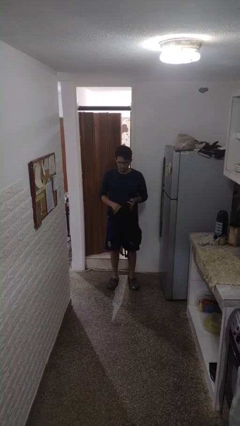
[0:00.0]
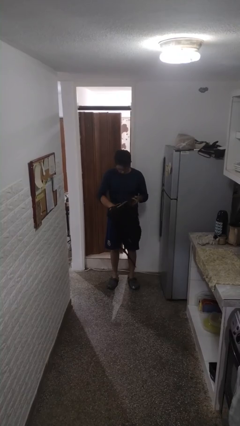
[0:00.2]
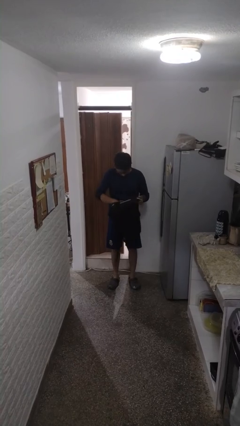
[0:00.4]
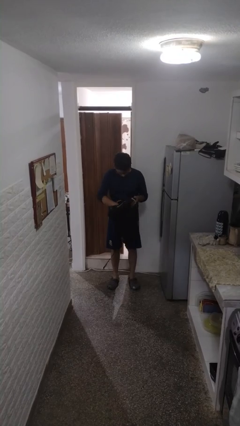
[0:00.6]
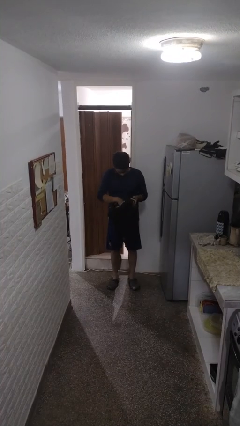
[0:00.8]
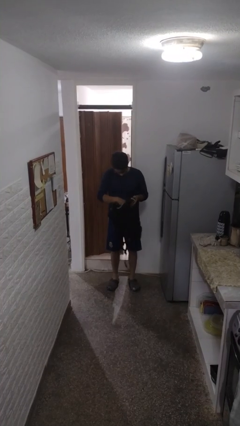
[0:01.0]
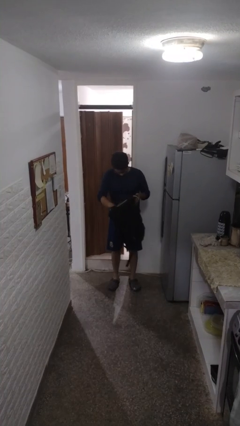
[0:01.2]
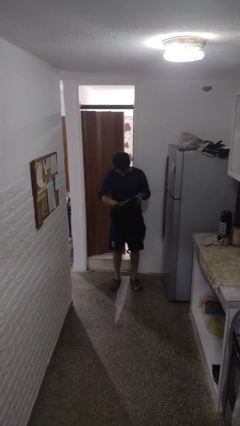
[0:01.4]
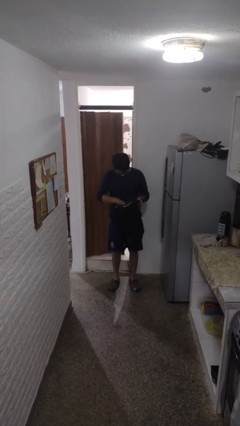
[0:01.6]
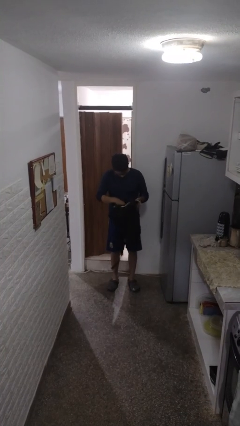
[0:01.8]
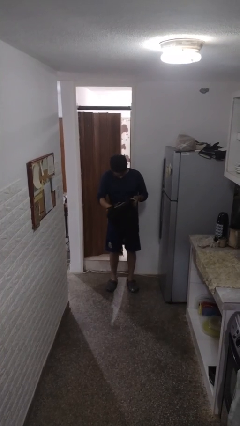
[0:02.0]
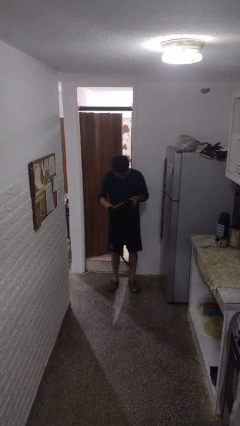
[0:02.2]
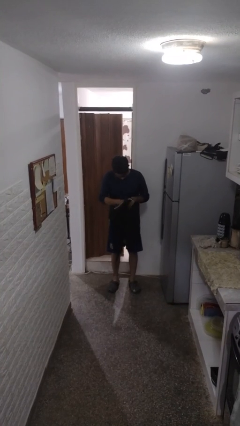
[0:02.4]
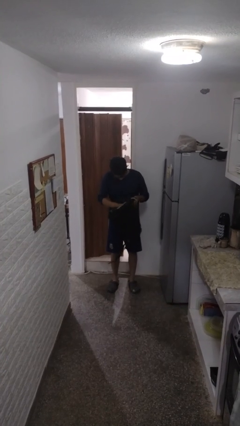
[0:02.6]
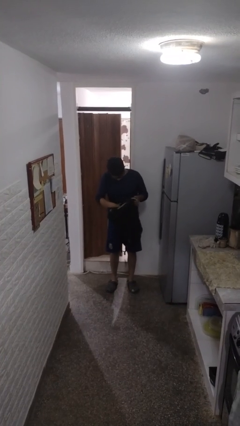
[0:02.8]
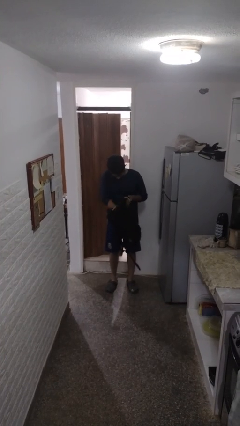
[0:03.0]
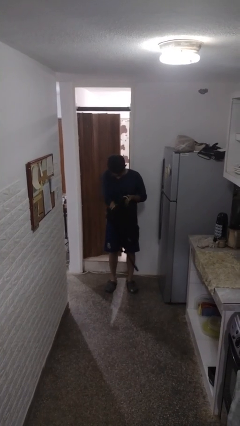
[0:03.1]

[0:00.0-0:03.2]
person searches in backpack

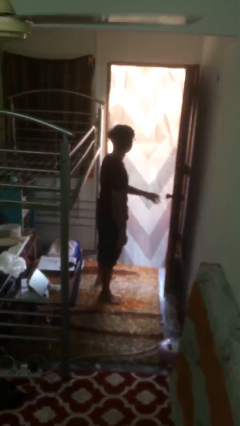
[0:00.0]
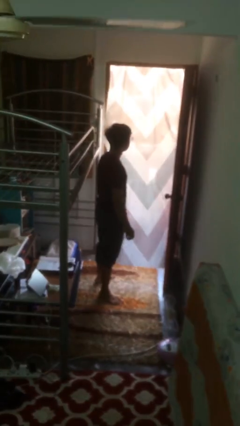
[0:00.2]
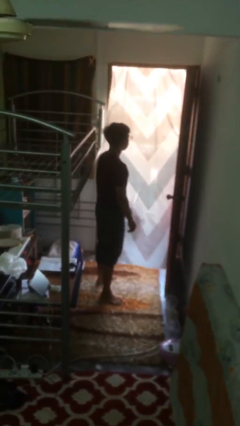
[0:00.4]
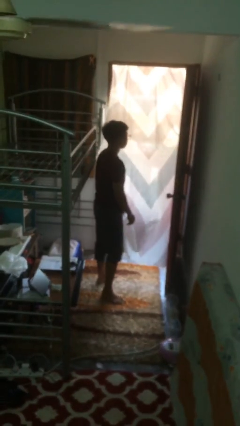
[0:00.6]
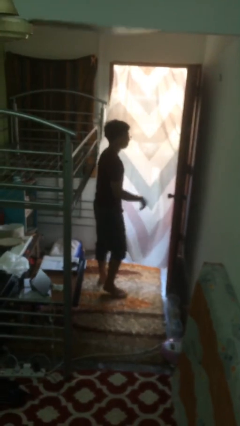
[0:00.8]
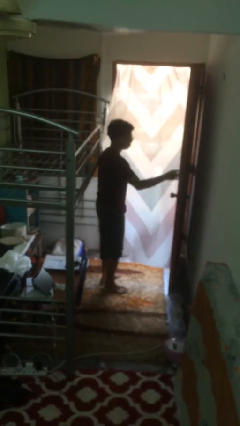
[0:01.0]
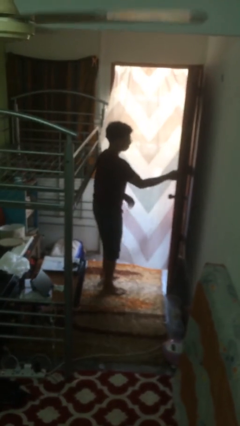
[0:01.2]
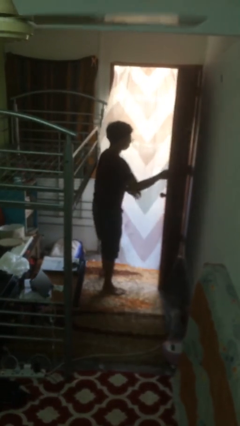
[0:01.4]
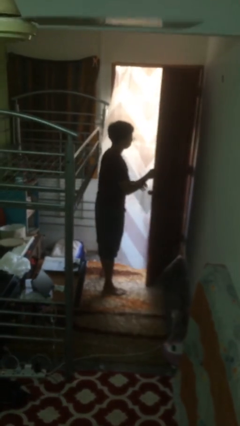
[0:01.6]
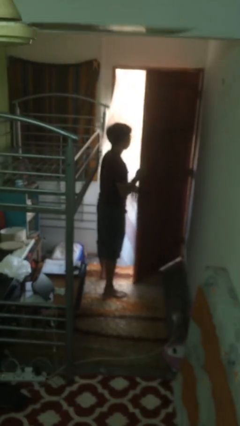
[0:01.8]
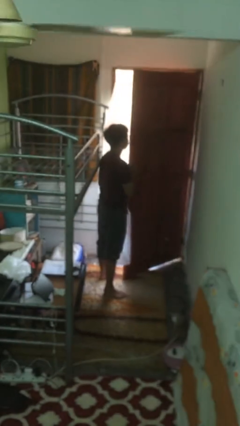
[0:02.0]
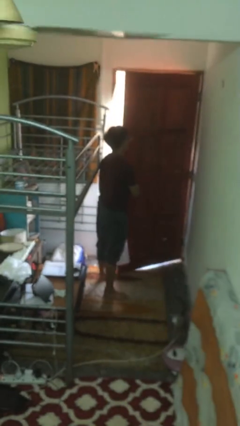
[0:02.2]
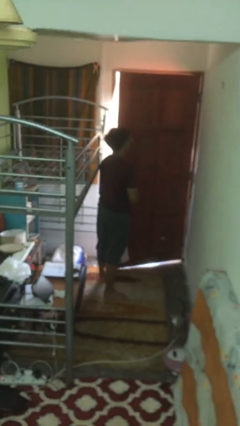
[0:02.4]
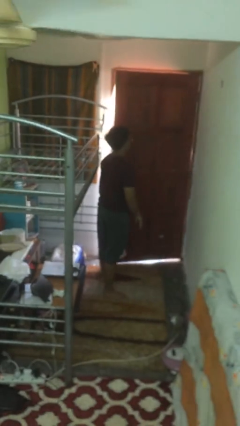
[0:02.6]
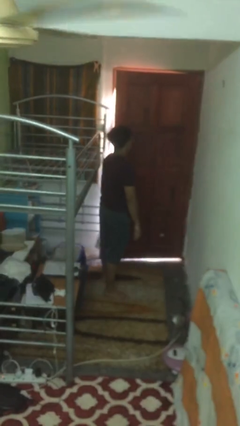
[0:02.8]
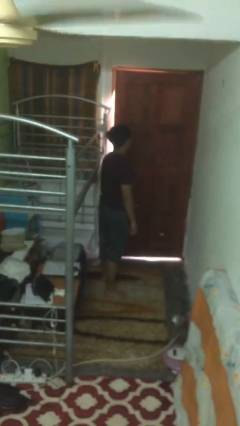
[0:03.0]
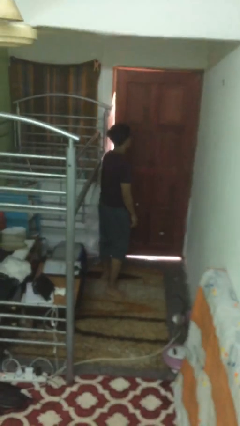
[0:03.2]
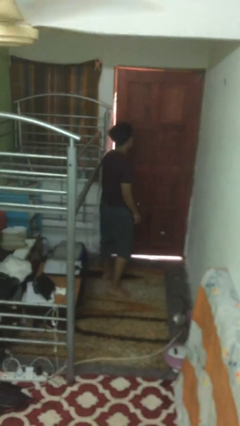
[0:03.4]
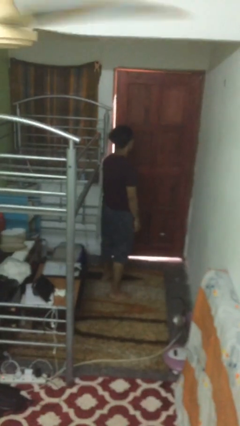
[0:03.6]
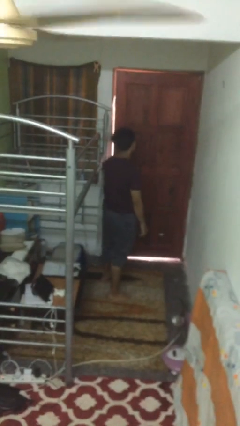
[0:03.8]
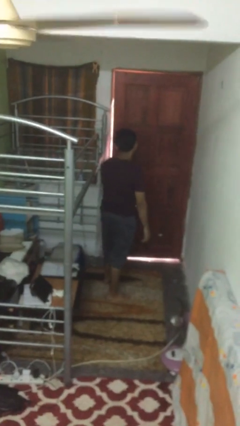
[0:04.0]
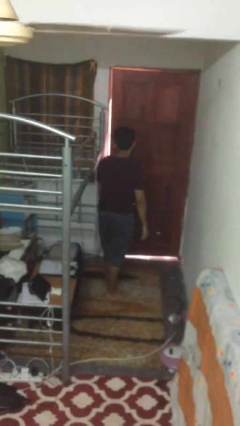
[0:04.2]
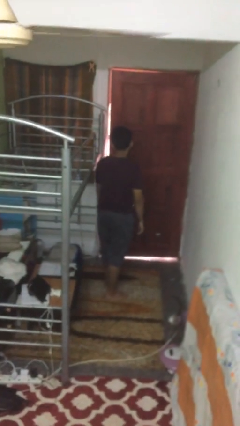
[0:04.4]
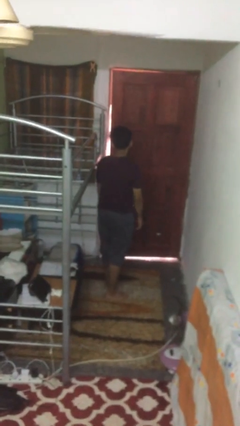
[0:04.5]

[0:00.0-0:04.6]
person closes facility door

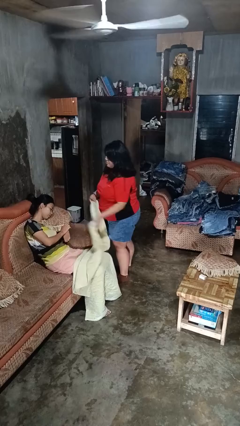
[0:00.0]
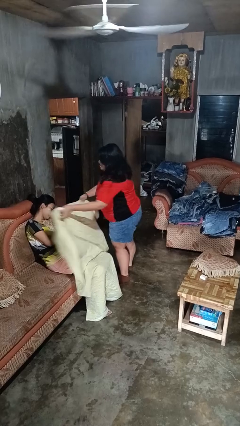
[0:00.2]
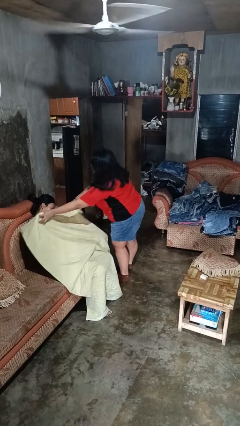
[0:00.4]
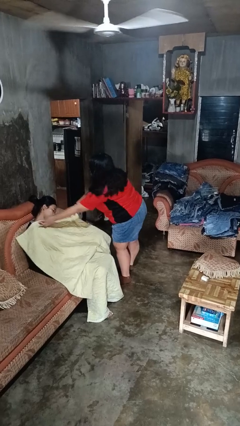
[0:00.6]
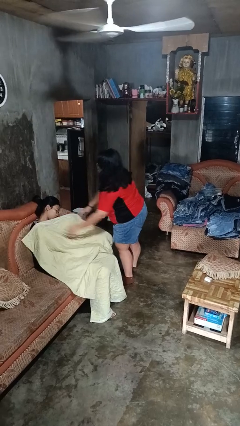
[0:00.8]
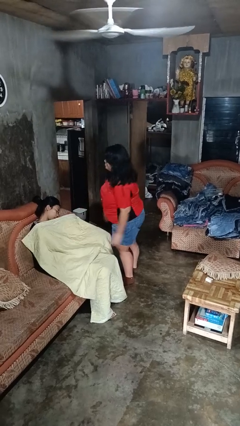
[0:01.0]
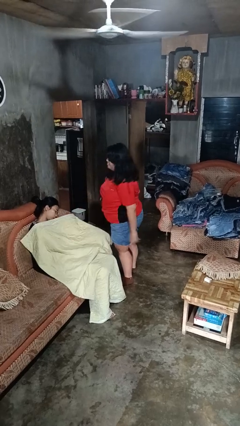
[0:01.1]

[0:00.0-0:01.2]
person covers friend with blanket

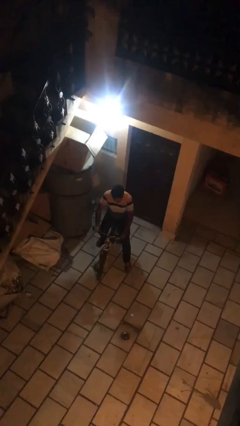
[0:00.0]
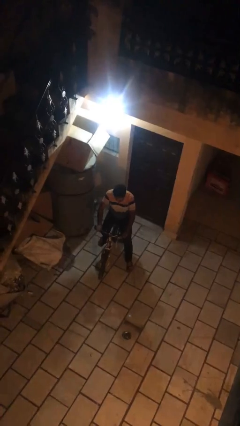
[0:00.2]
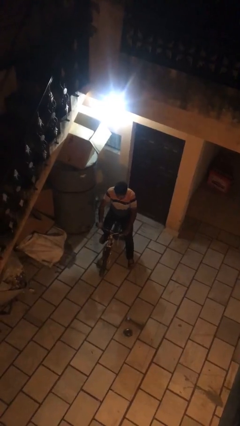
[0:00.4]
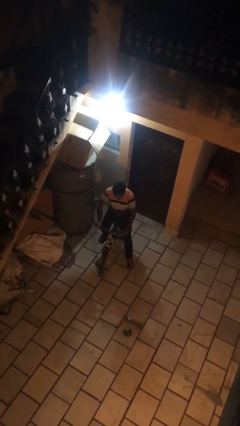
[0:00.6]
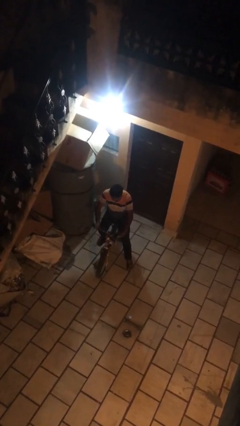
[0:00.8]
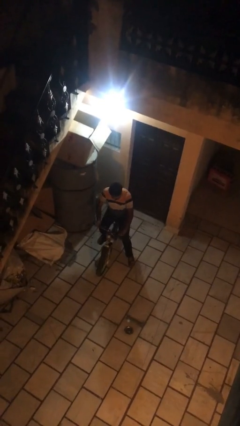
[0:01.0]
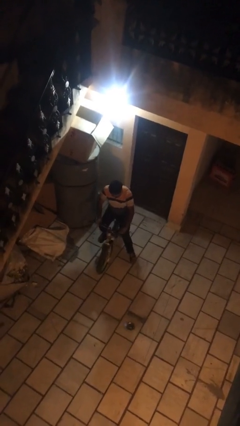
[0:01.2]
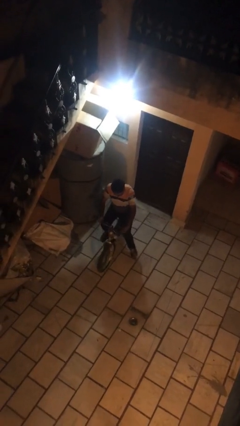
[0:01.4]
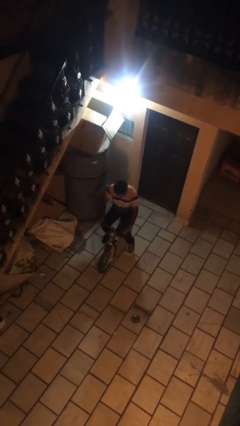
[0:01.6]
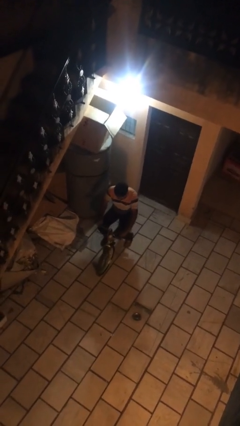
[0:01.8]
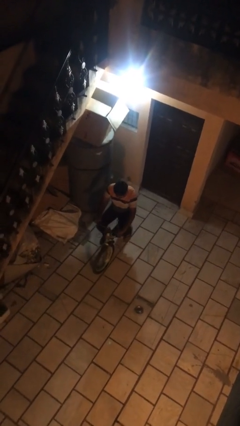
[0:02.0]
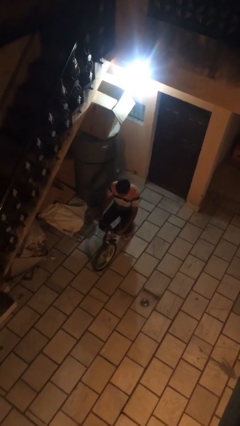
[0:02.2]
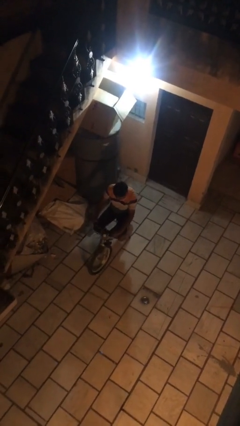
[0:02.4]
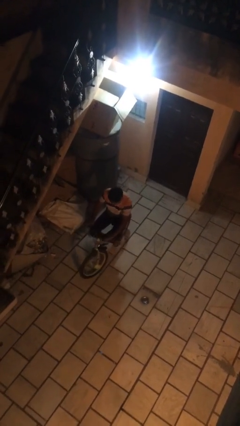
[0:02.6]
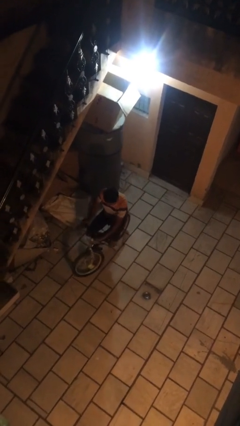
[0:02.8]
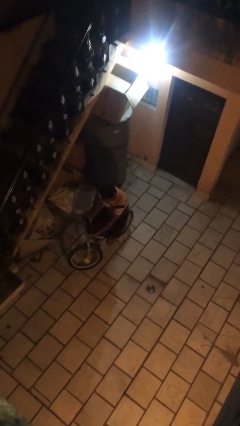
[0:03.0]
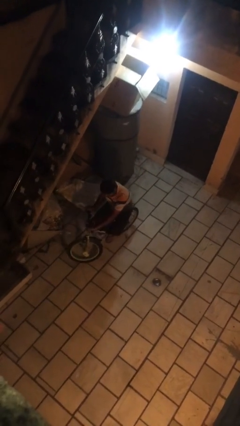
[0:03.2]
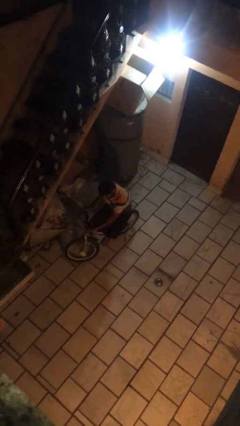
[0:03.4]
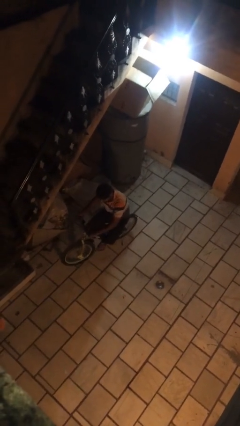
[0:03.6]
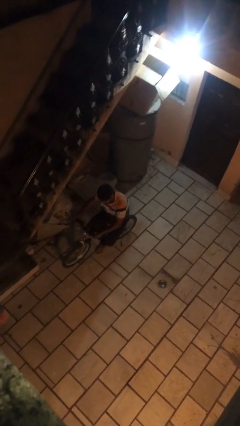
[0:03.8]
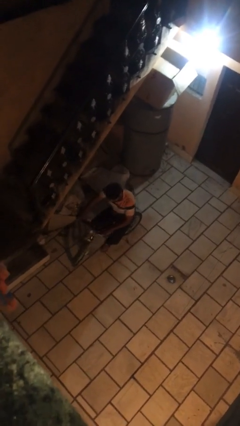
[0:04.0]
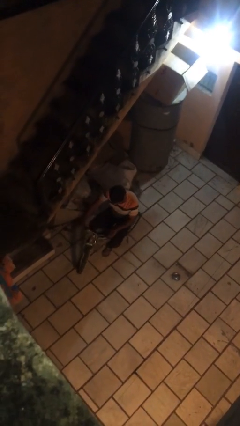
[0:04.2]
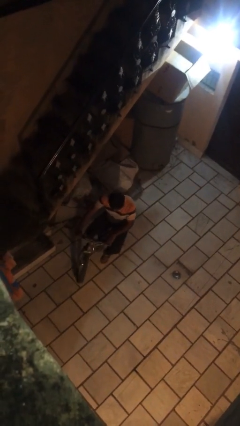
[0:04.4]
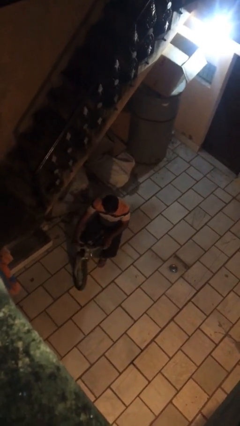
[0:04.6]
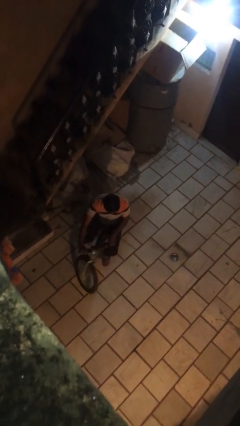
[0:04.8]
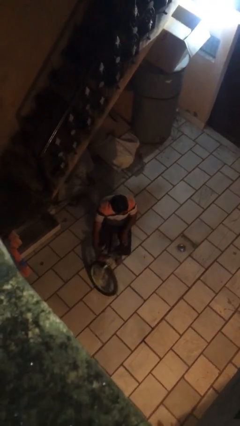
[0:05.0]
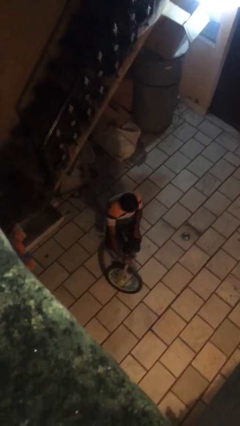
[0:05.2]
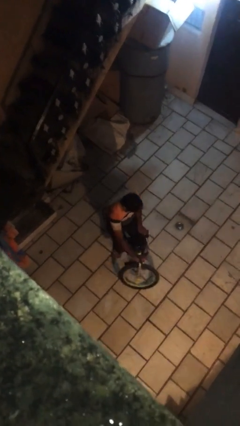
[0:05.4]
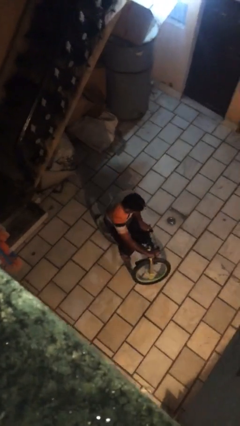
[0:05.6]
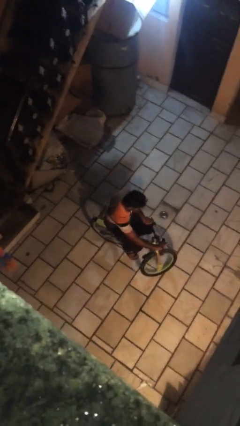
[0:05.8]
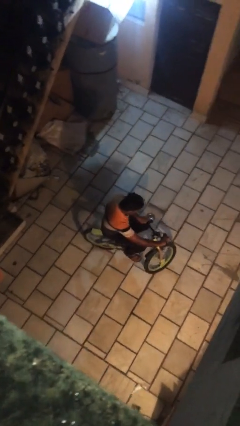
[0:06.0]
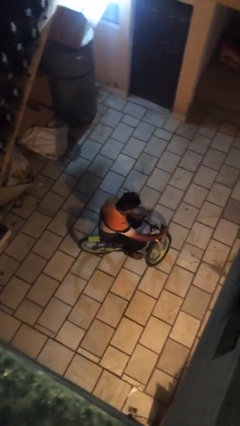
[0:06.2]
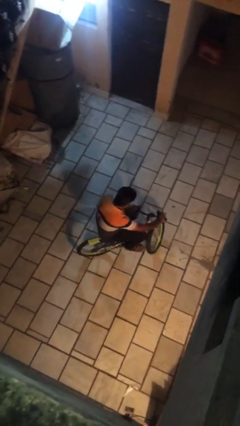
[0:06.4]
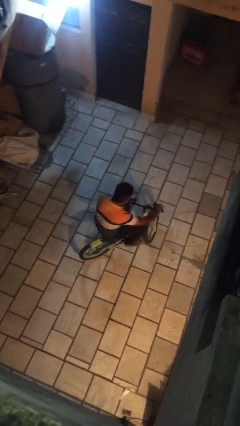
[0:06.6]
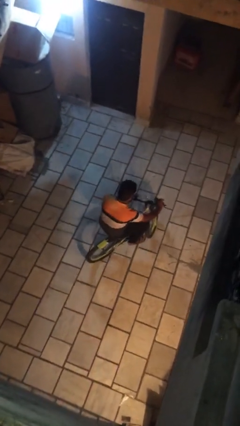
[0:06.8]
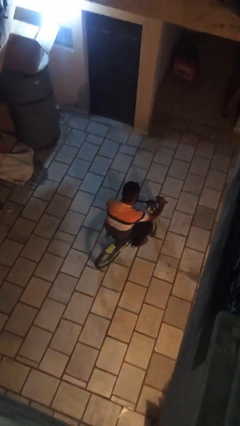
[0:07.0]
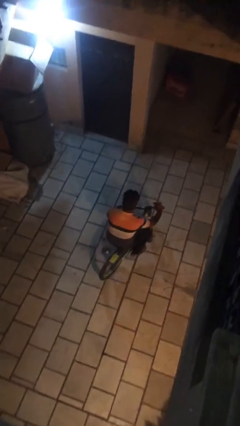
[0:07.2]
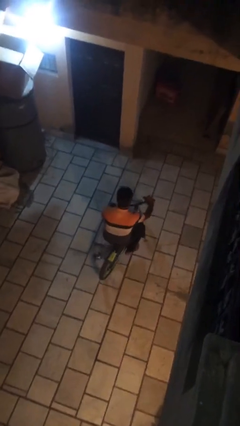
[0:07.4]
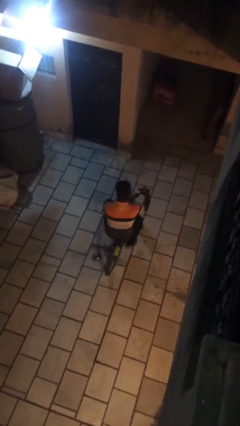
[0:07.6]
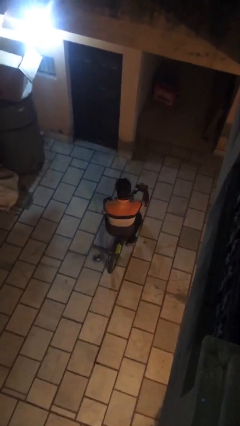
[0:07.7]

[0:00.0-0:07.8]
person rides bicycle

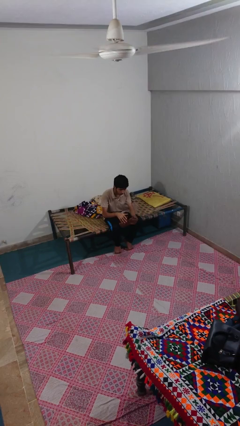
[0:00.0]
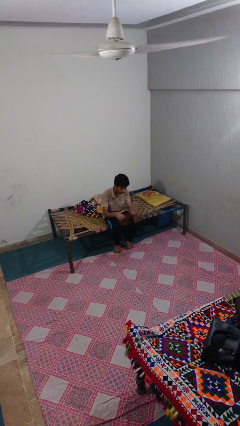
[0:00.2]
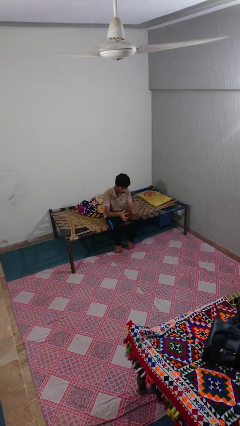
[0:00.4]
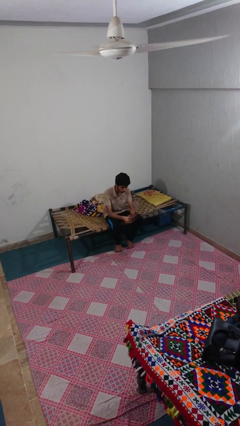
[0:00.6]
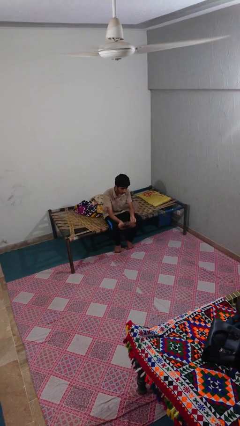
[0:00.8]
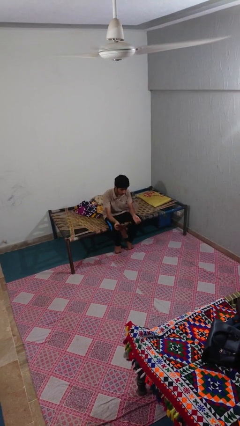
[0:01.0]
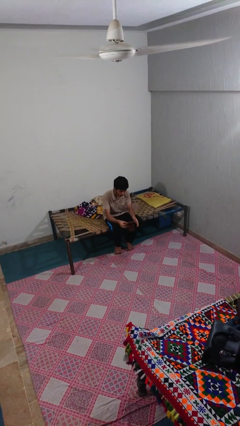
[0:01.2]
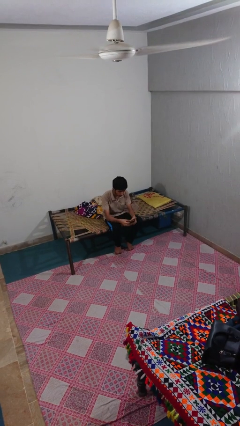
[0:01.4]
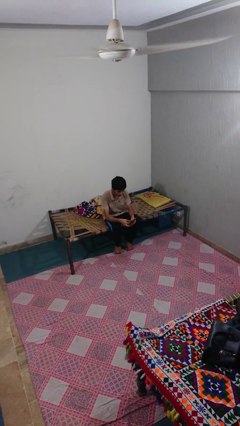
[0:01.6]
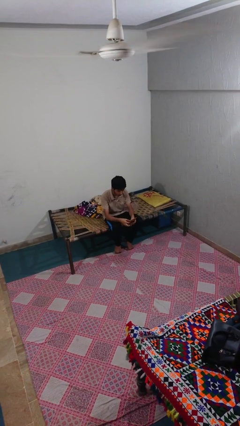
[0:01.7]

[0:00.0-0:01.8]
person takes off gloves
